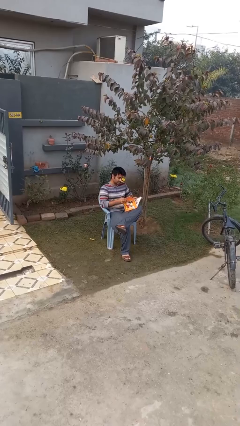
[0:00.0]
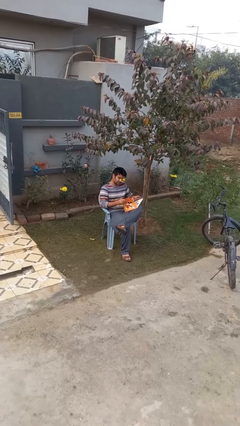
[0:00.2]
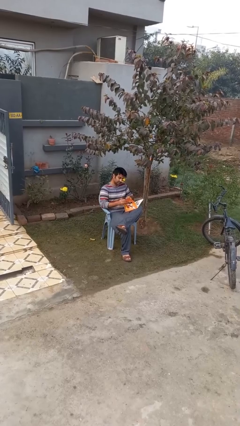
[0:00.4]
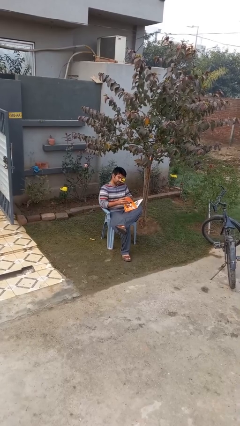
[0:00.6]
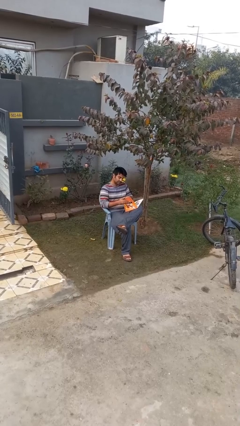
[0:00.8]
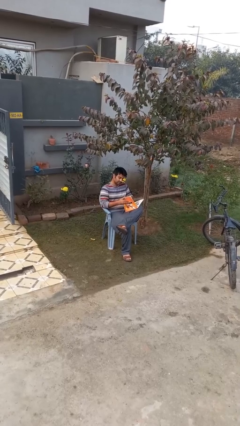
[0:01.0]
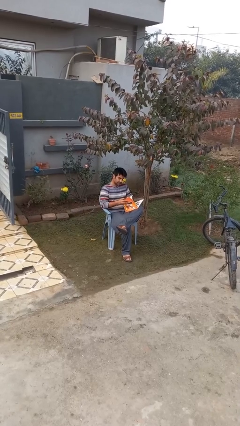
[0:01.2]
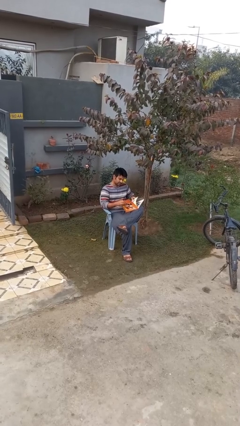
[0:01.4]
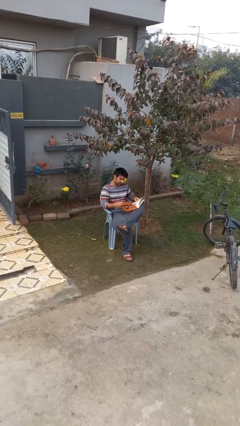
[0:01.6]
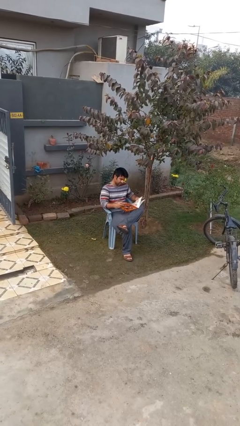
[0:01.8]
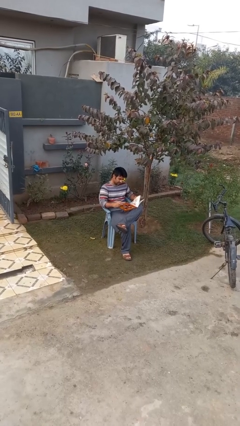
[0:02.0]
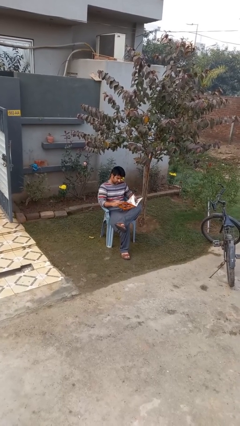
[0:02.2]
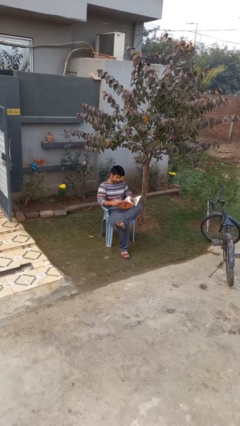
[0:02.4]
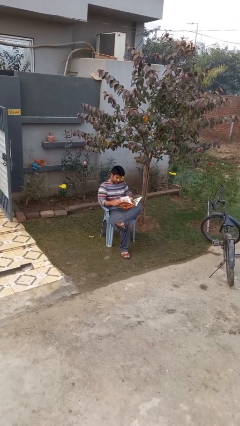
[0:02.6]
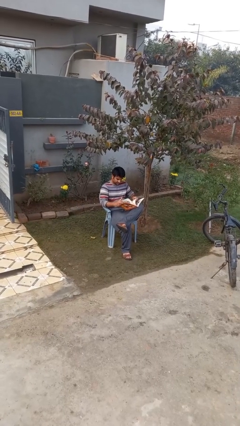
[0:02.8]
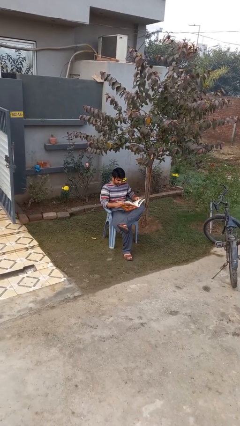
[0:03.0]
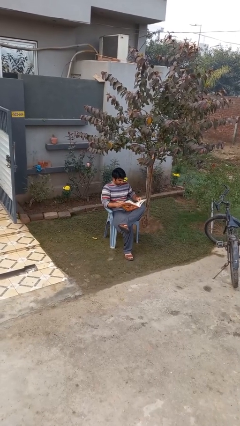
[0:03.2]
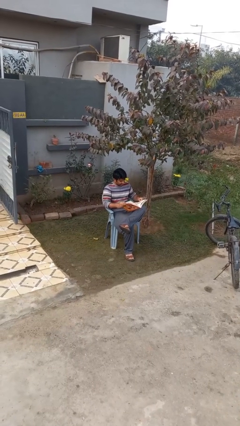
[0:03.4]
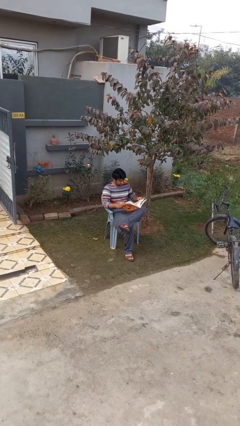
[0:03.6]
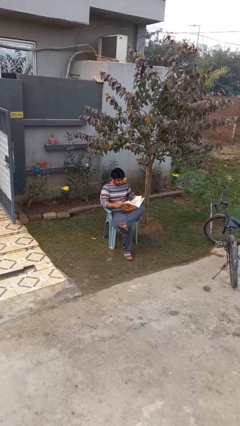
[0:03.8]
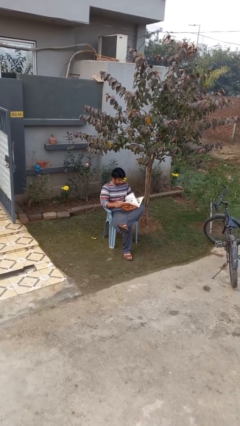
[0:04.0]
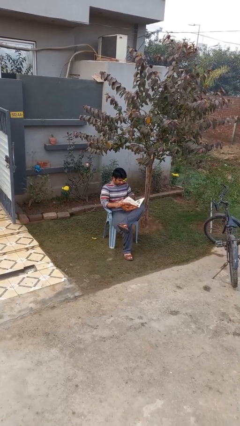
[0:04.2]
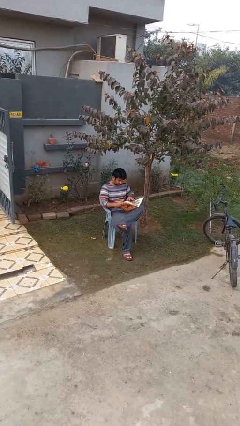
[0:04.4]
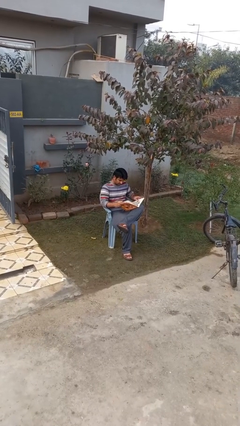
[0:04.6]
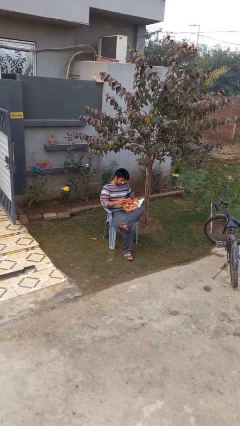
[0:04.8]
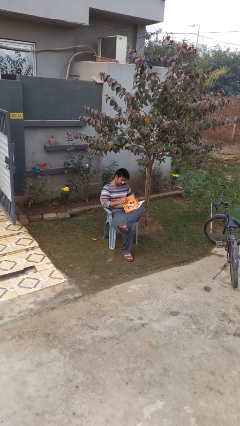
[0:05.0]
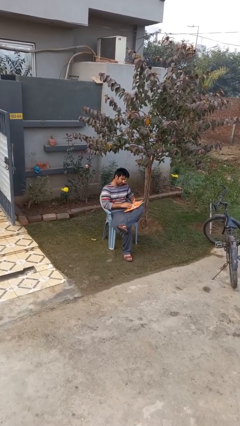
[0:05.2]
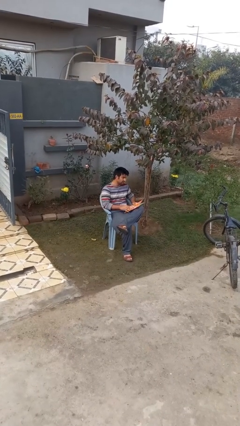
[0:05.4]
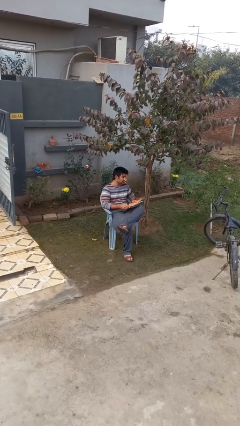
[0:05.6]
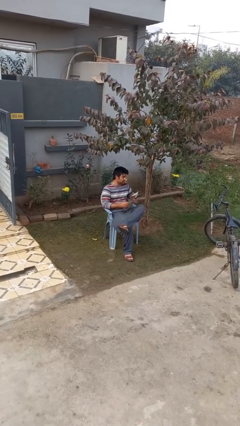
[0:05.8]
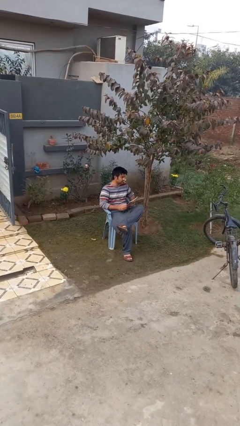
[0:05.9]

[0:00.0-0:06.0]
person reads document

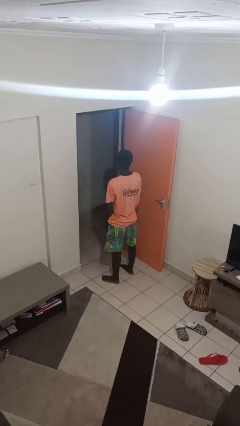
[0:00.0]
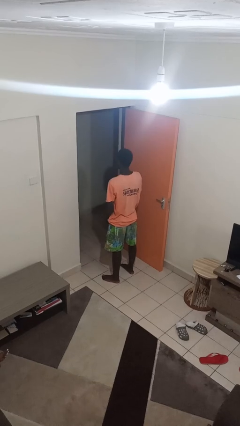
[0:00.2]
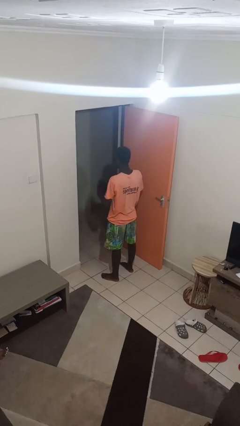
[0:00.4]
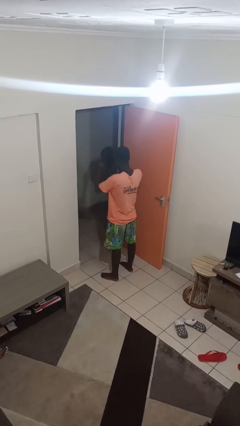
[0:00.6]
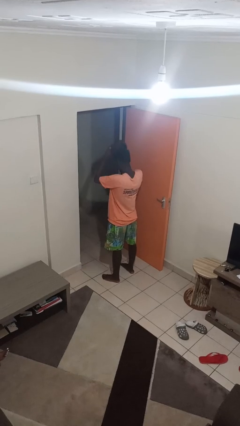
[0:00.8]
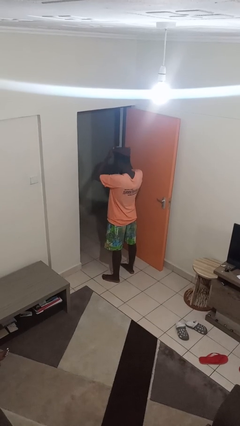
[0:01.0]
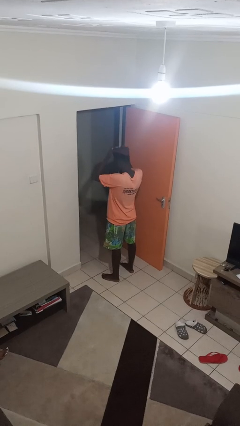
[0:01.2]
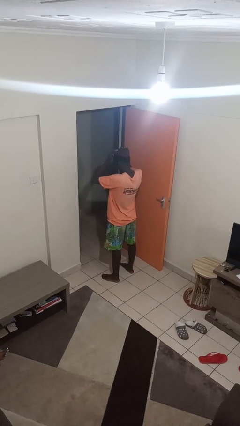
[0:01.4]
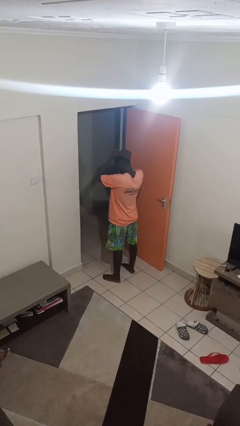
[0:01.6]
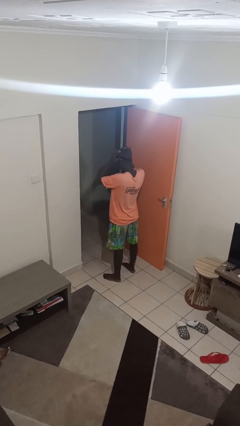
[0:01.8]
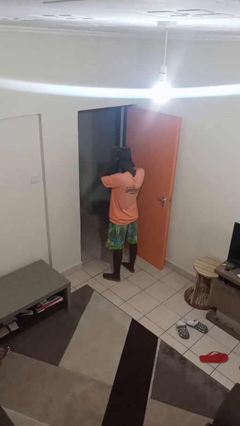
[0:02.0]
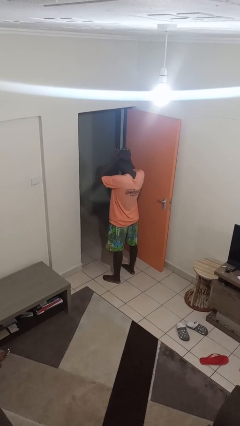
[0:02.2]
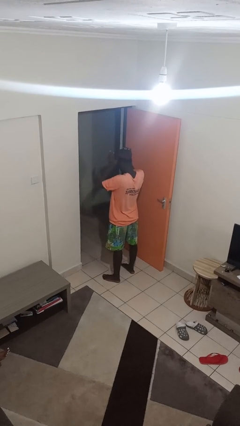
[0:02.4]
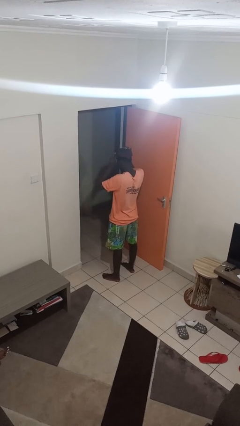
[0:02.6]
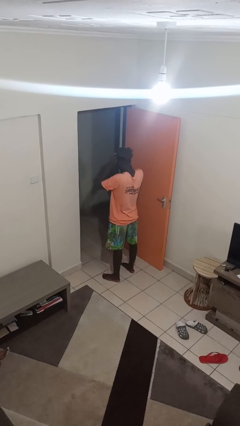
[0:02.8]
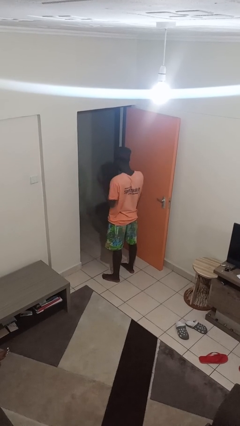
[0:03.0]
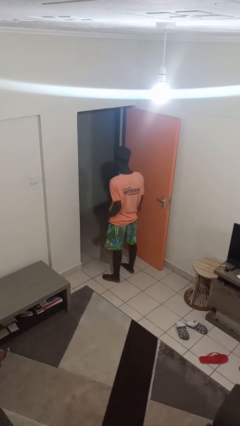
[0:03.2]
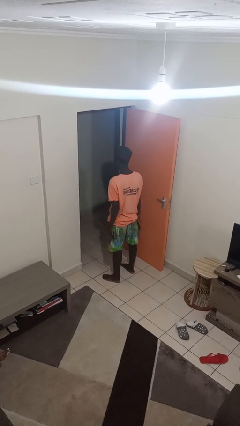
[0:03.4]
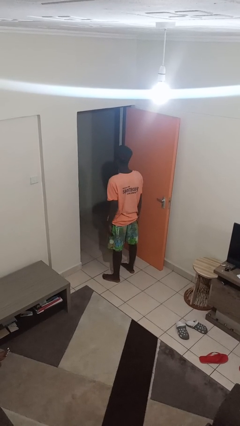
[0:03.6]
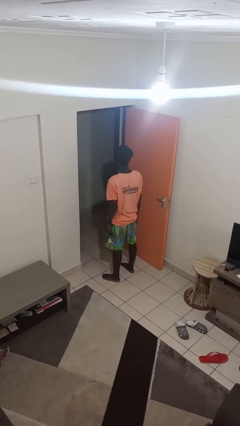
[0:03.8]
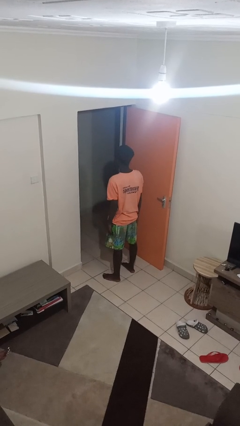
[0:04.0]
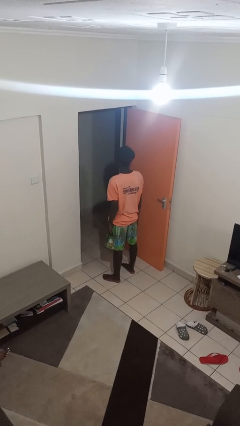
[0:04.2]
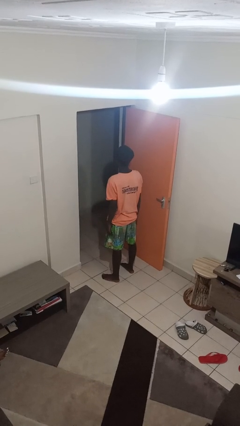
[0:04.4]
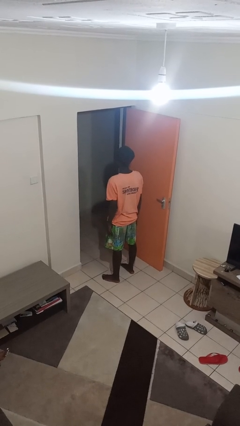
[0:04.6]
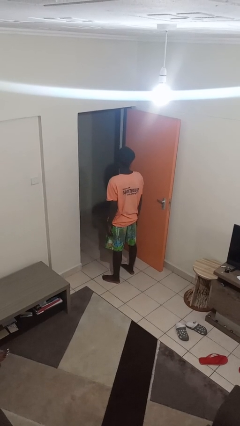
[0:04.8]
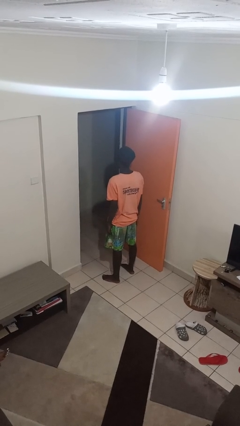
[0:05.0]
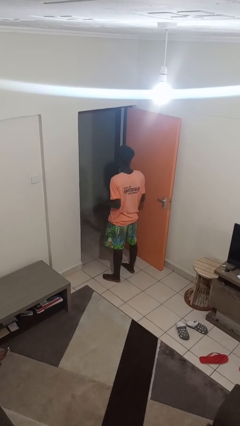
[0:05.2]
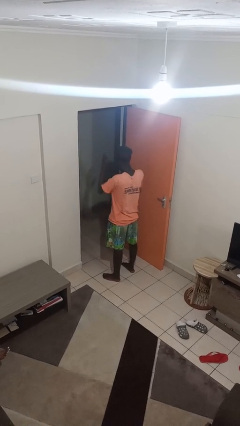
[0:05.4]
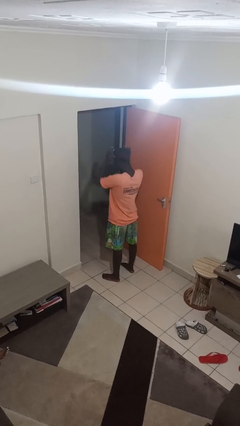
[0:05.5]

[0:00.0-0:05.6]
person puts on hat

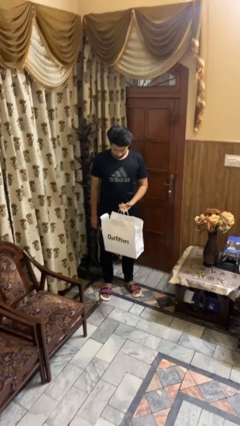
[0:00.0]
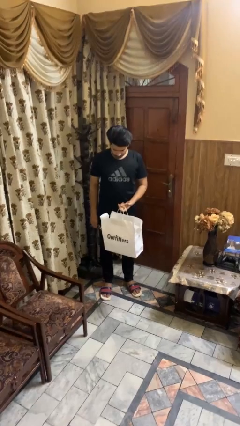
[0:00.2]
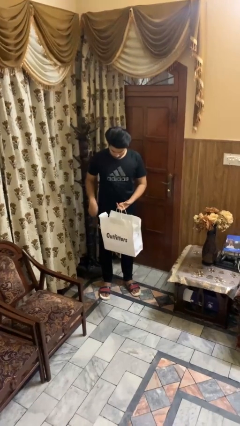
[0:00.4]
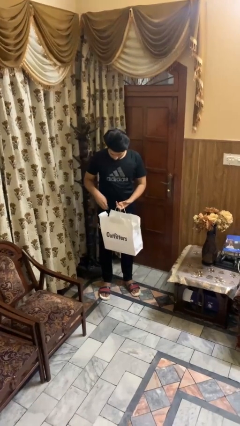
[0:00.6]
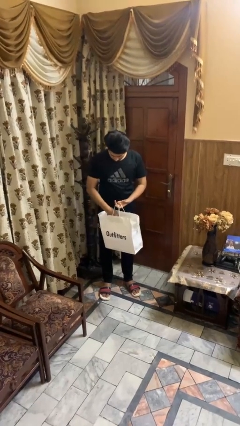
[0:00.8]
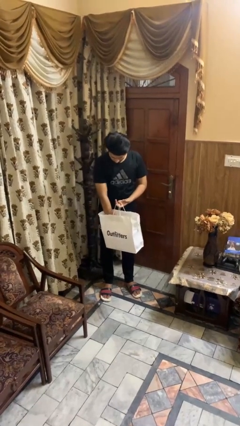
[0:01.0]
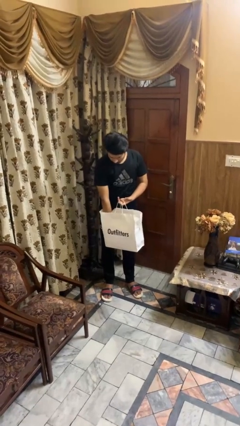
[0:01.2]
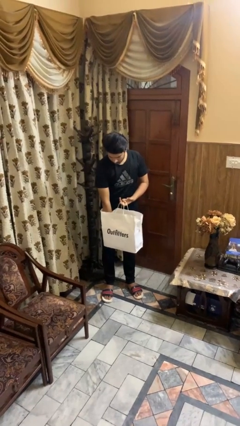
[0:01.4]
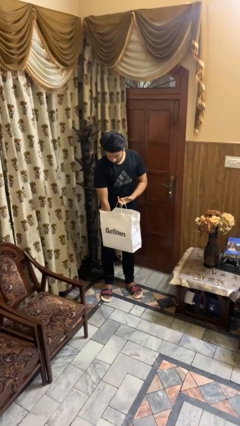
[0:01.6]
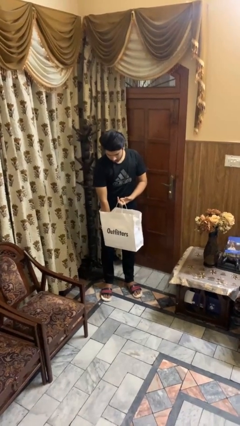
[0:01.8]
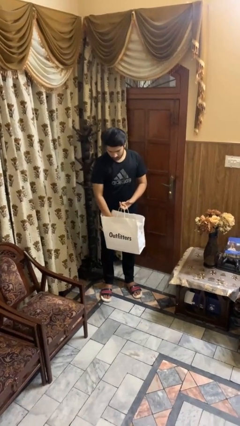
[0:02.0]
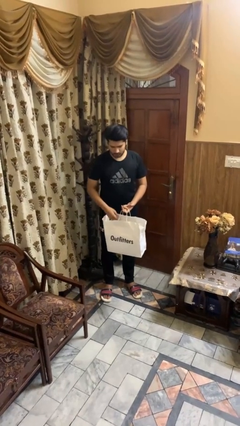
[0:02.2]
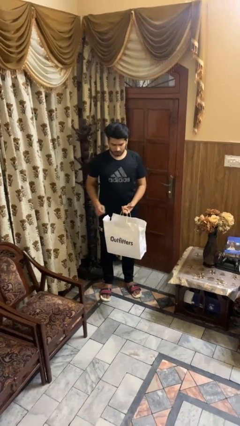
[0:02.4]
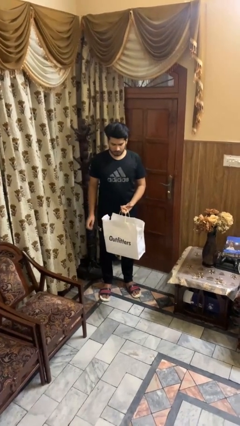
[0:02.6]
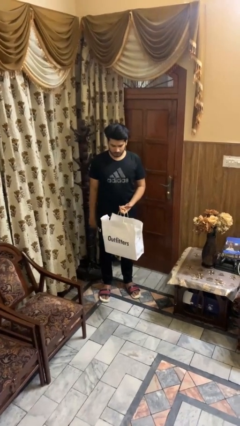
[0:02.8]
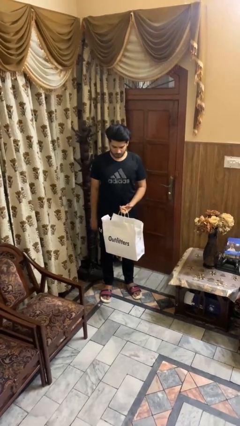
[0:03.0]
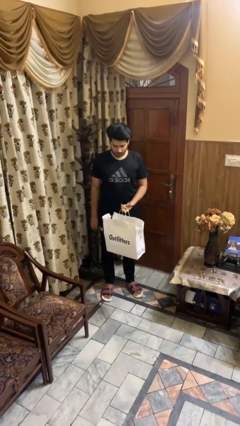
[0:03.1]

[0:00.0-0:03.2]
person searches in bag

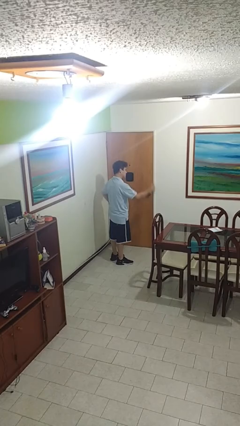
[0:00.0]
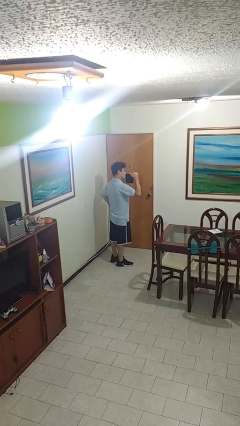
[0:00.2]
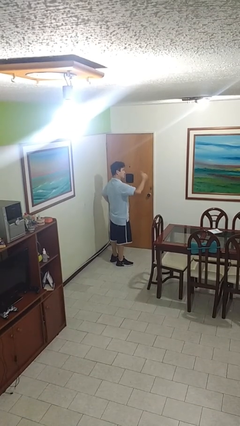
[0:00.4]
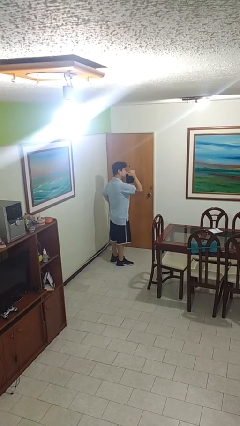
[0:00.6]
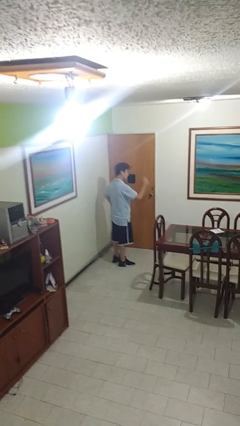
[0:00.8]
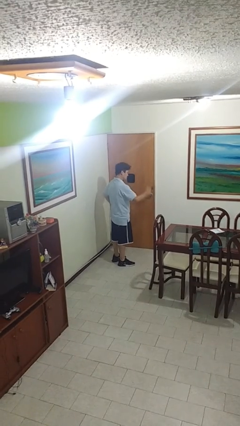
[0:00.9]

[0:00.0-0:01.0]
person gestures behind me

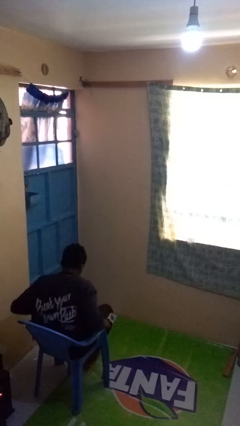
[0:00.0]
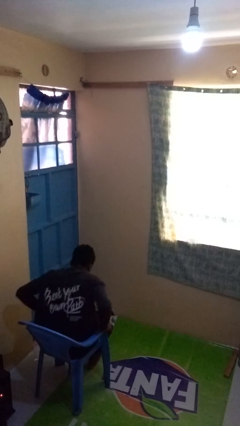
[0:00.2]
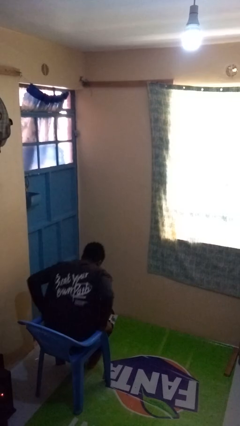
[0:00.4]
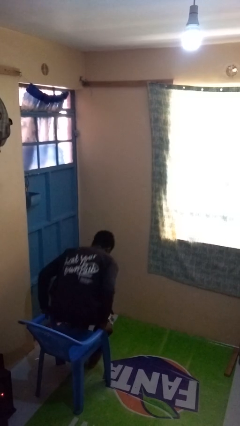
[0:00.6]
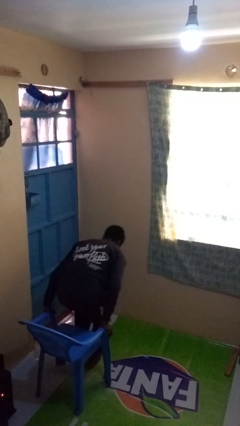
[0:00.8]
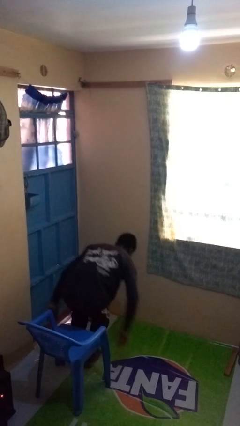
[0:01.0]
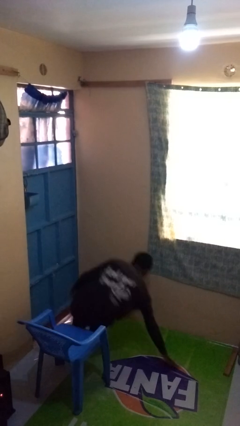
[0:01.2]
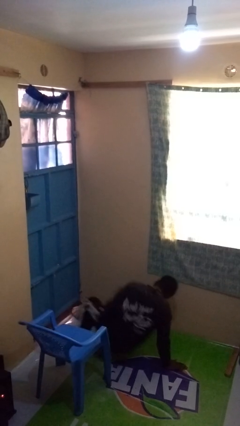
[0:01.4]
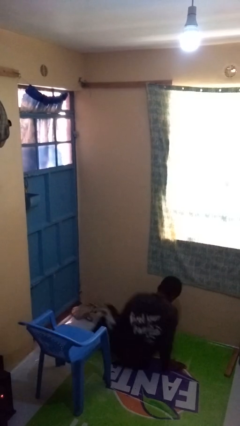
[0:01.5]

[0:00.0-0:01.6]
person falls from chair
